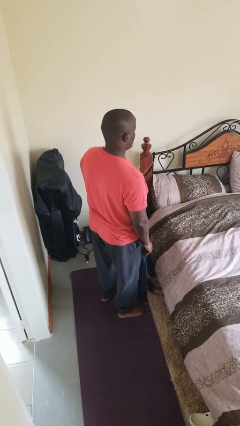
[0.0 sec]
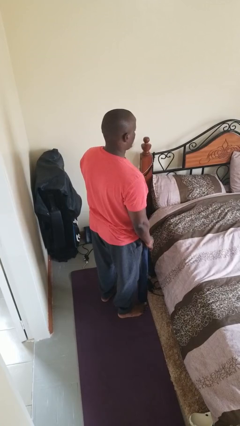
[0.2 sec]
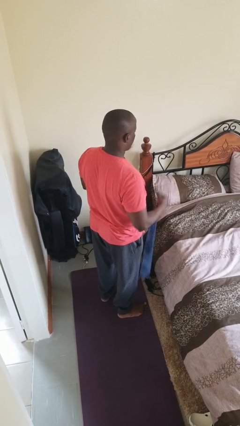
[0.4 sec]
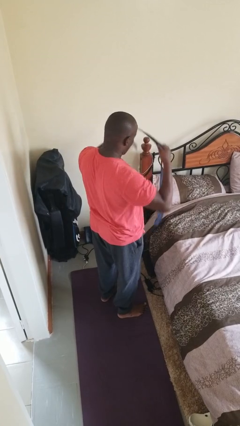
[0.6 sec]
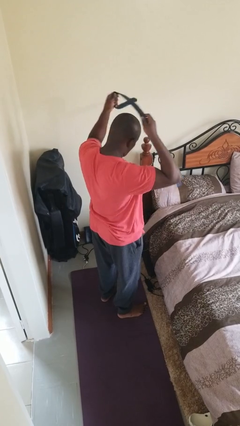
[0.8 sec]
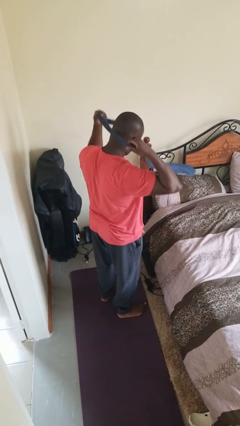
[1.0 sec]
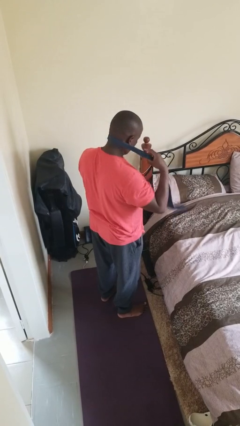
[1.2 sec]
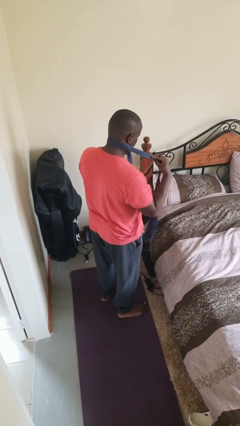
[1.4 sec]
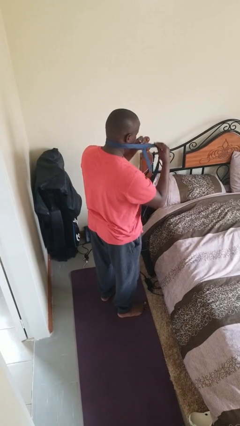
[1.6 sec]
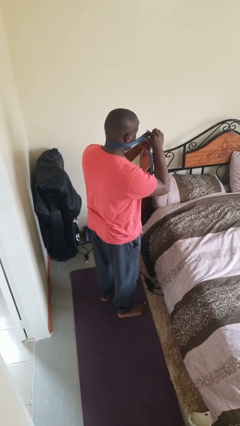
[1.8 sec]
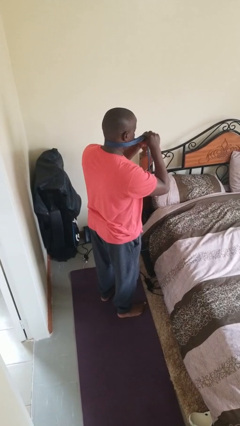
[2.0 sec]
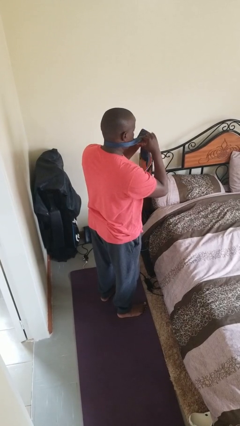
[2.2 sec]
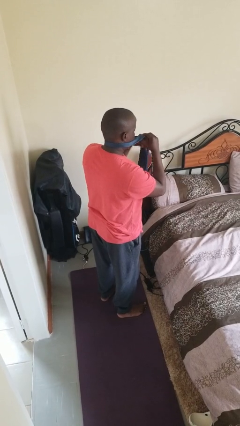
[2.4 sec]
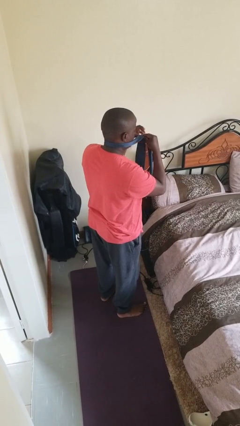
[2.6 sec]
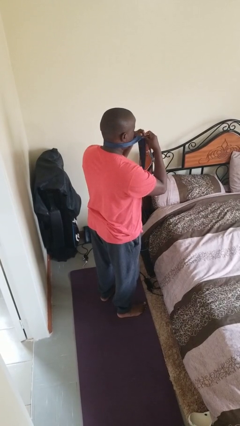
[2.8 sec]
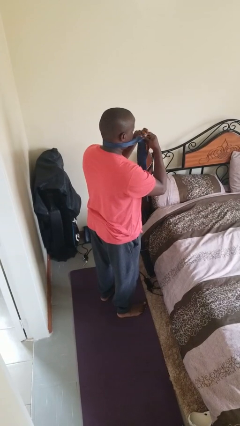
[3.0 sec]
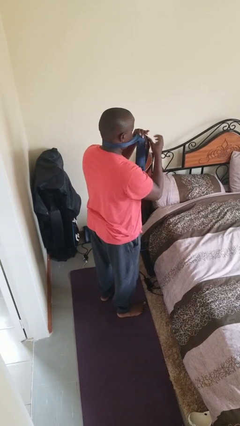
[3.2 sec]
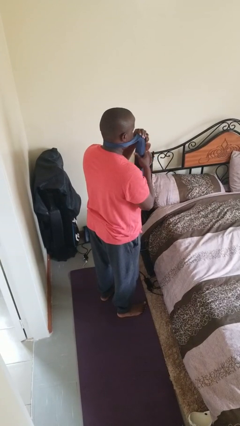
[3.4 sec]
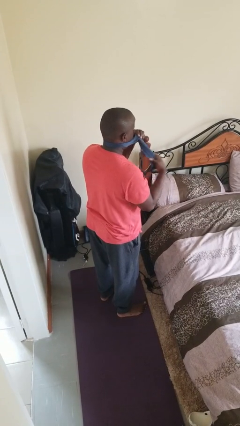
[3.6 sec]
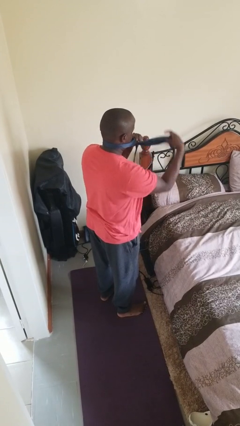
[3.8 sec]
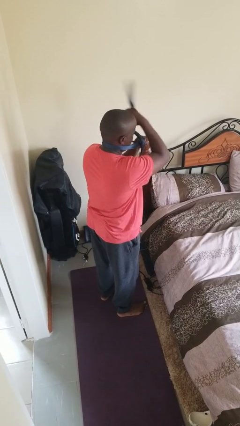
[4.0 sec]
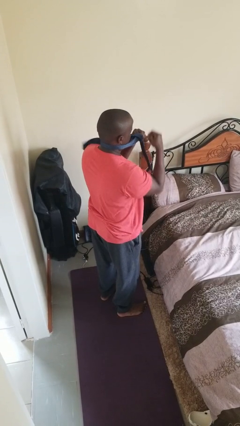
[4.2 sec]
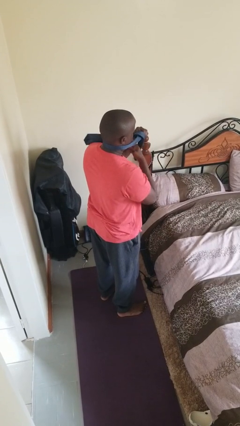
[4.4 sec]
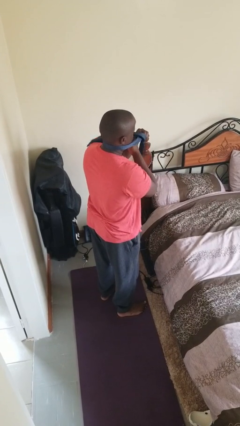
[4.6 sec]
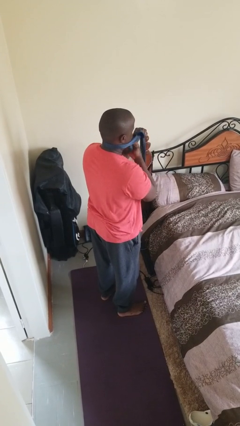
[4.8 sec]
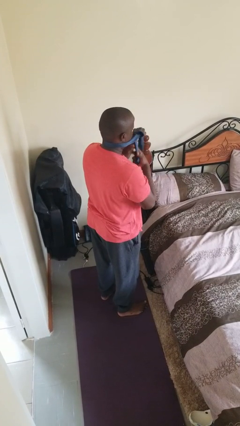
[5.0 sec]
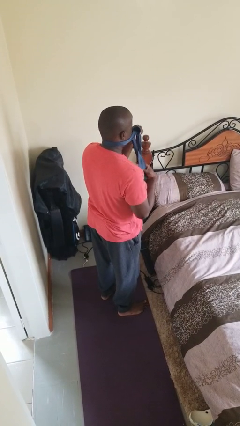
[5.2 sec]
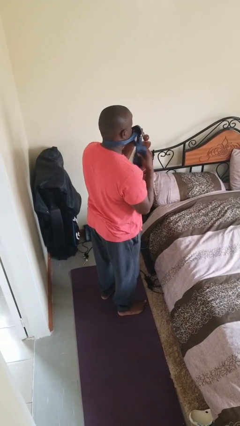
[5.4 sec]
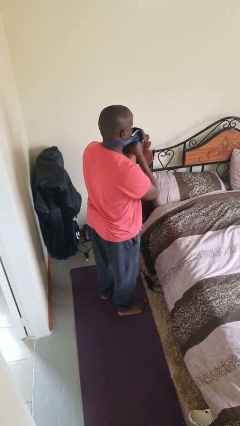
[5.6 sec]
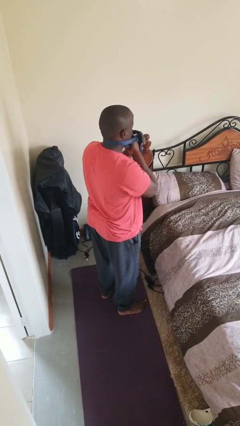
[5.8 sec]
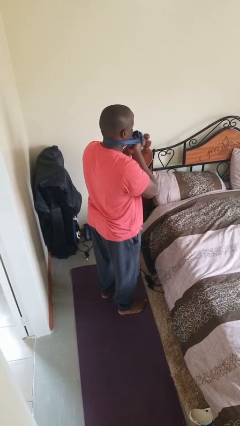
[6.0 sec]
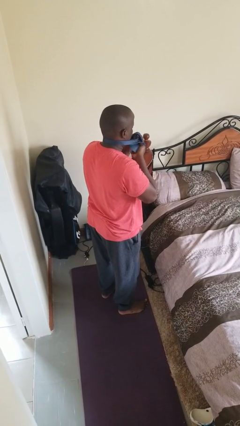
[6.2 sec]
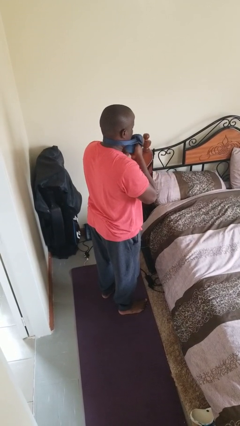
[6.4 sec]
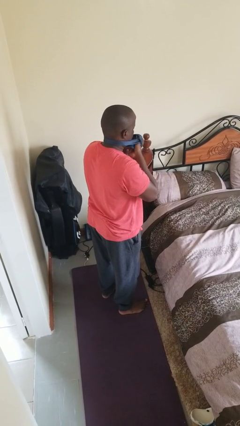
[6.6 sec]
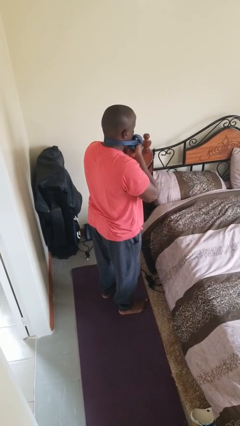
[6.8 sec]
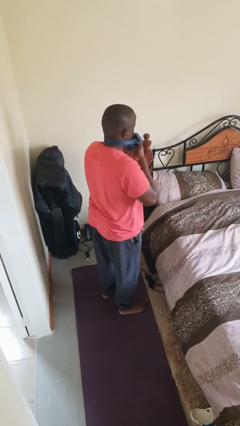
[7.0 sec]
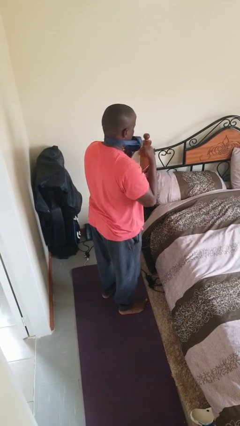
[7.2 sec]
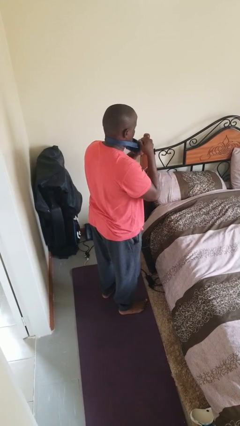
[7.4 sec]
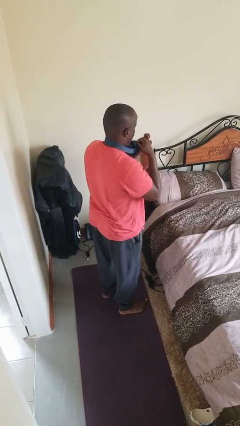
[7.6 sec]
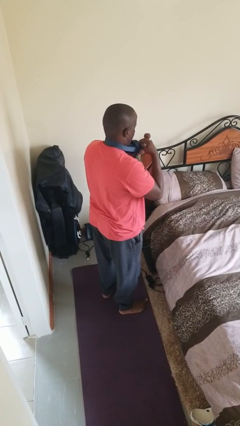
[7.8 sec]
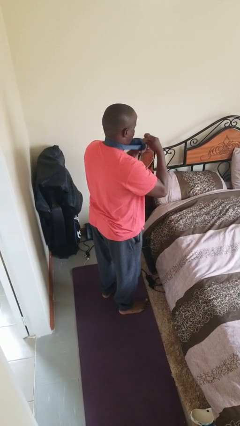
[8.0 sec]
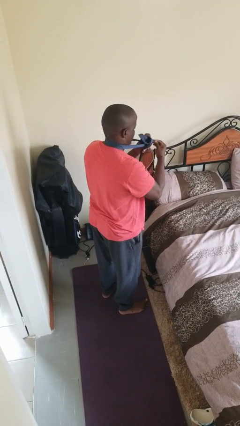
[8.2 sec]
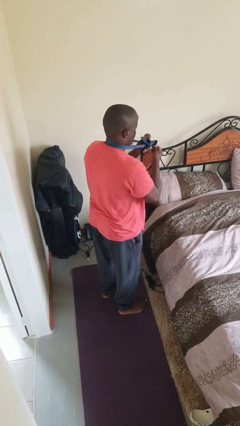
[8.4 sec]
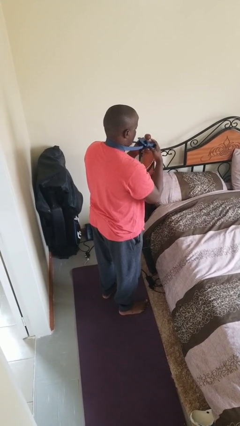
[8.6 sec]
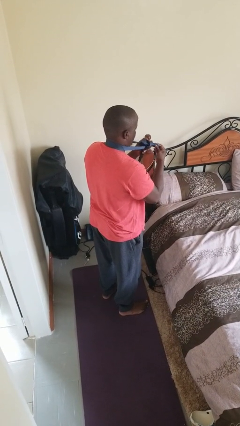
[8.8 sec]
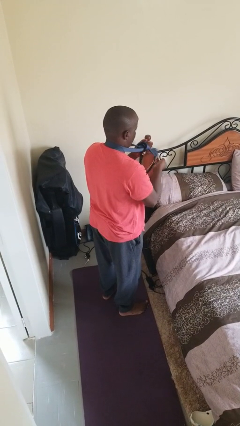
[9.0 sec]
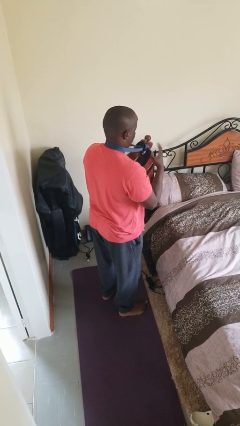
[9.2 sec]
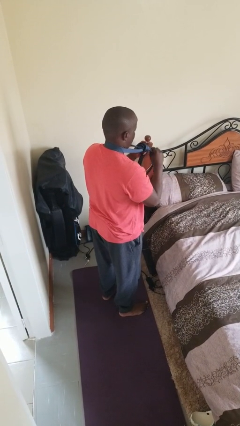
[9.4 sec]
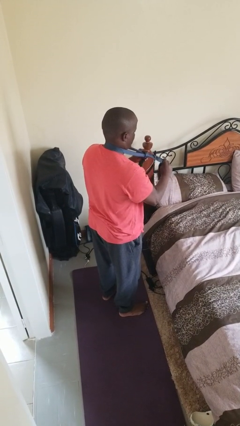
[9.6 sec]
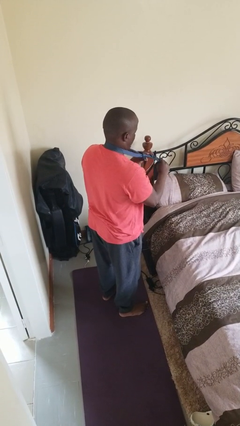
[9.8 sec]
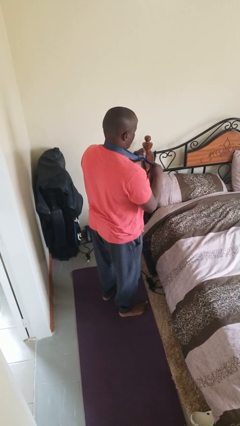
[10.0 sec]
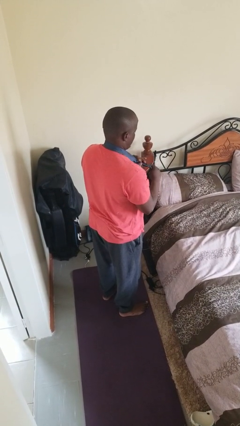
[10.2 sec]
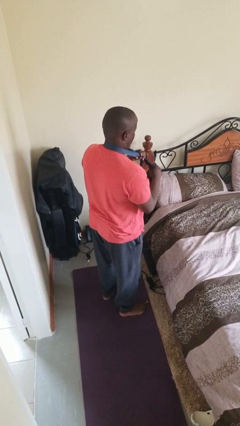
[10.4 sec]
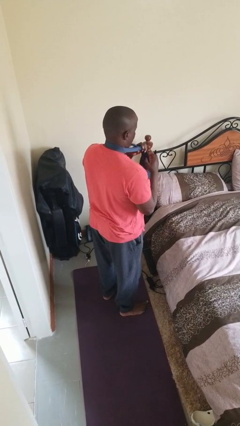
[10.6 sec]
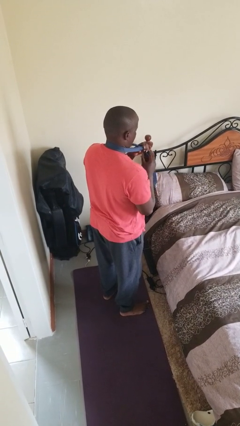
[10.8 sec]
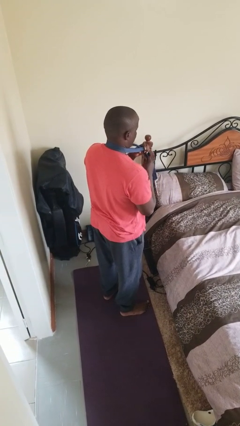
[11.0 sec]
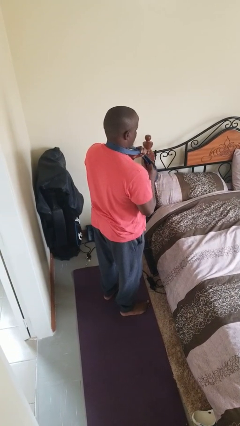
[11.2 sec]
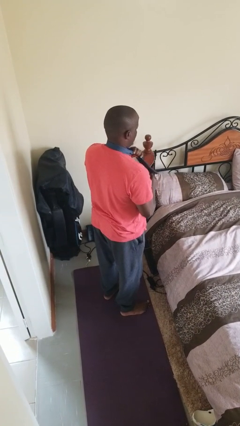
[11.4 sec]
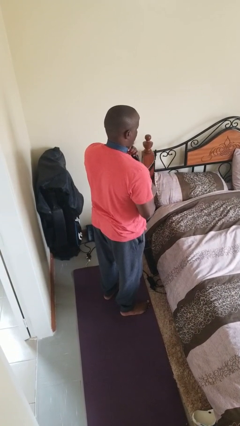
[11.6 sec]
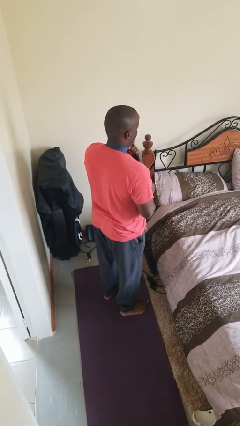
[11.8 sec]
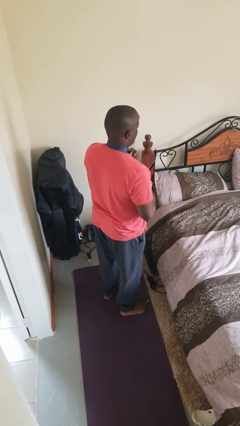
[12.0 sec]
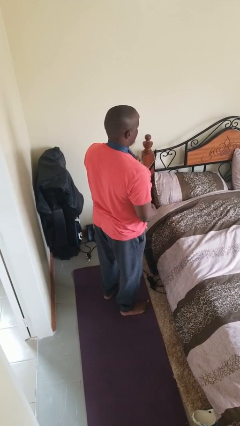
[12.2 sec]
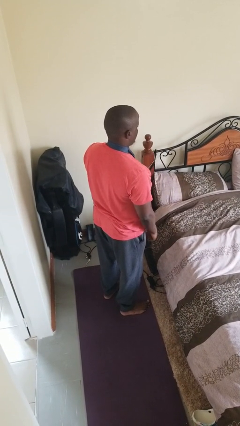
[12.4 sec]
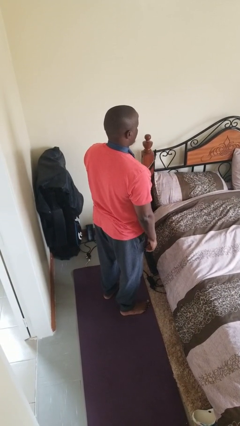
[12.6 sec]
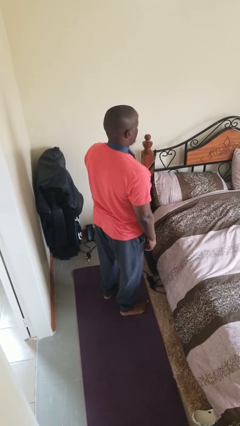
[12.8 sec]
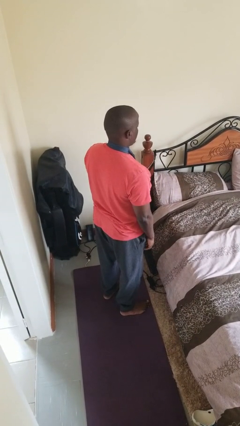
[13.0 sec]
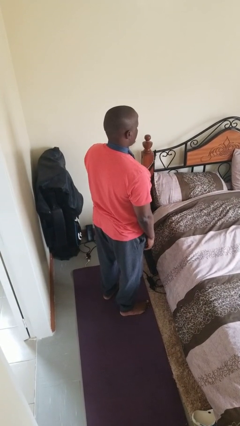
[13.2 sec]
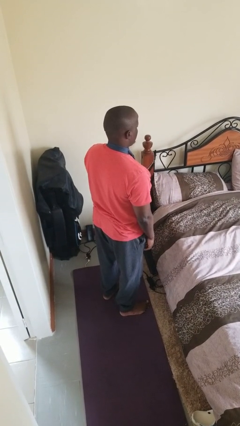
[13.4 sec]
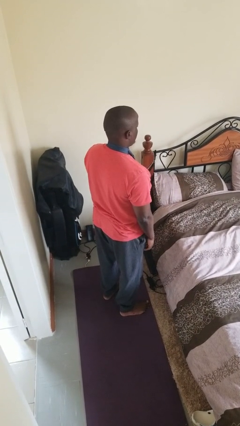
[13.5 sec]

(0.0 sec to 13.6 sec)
person puts on necktie

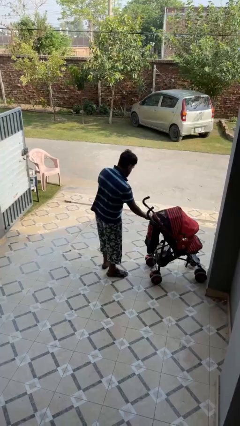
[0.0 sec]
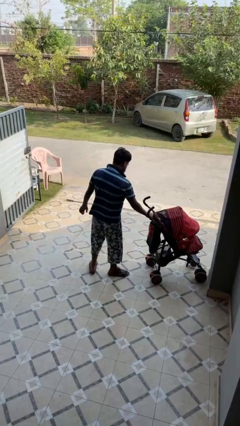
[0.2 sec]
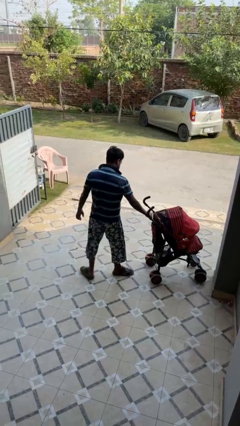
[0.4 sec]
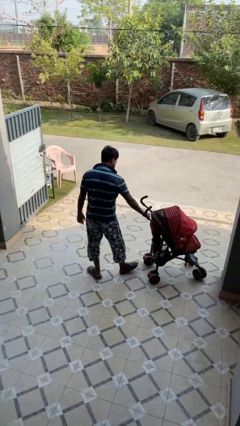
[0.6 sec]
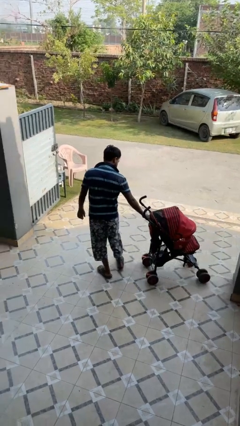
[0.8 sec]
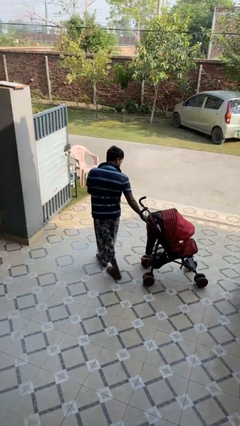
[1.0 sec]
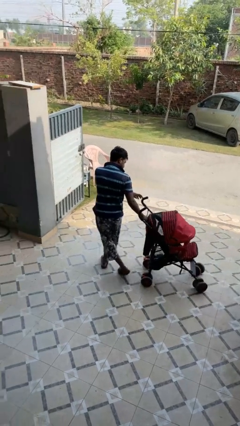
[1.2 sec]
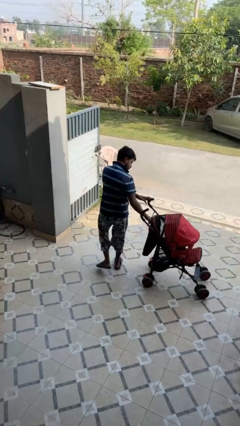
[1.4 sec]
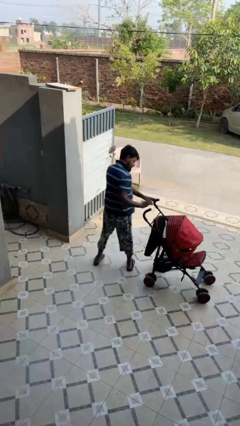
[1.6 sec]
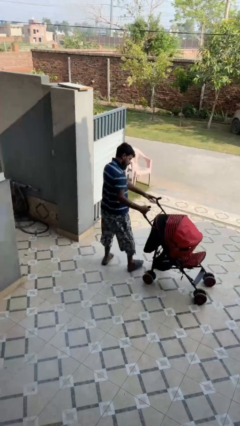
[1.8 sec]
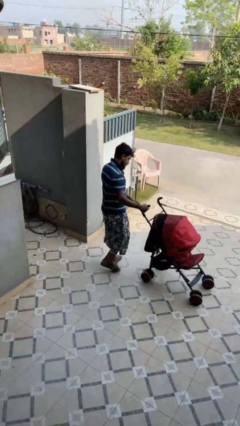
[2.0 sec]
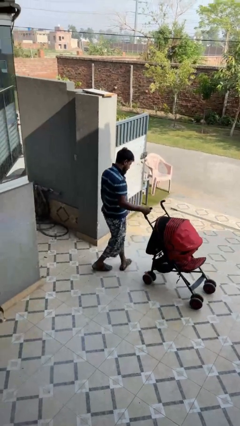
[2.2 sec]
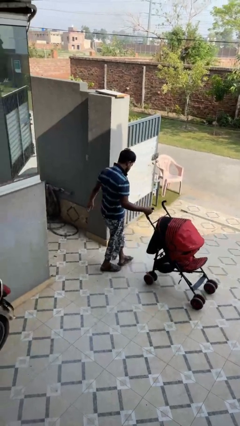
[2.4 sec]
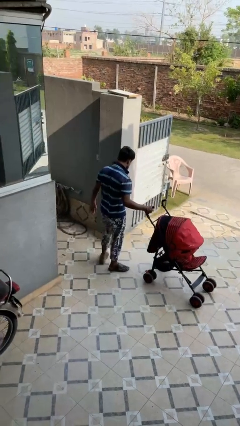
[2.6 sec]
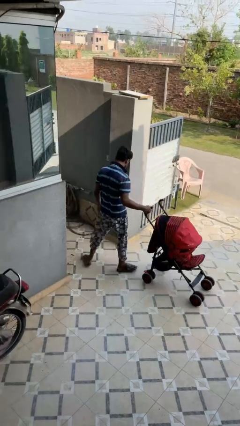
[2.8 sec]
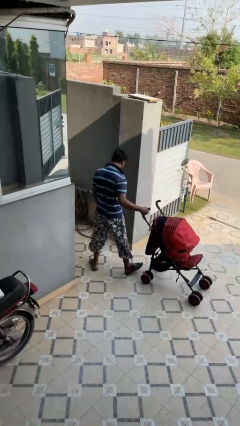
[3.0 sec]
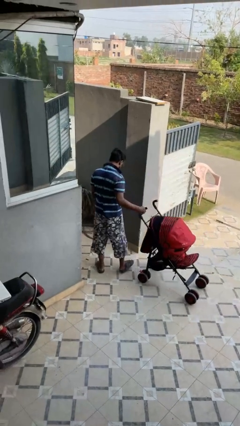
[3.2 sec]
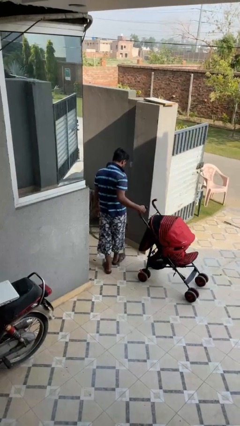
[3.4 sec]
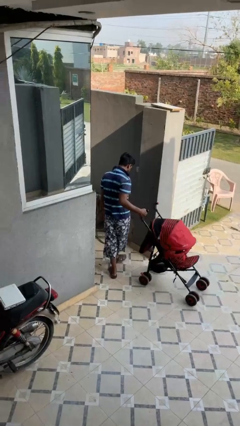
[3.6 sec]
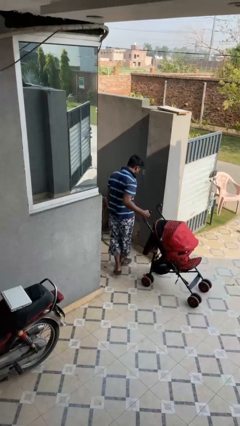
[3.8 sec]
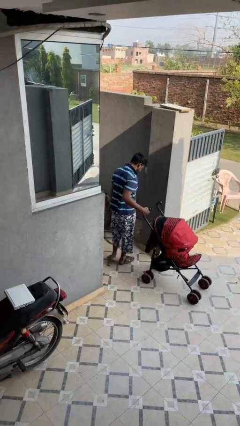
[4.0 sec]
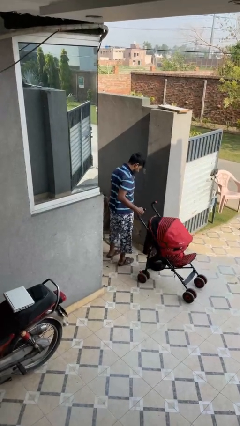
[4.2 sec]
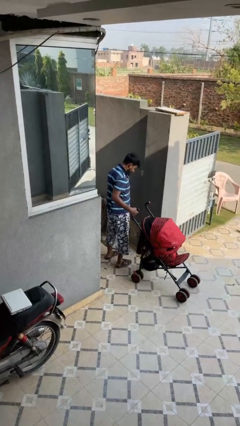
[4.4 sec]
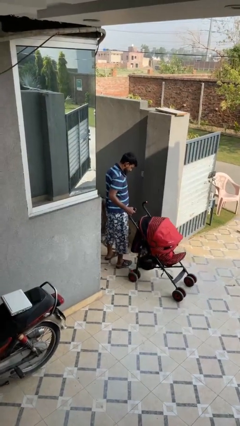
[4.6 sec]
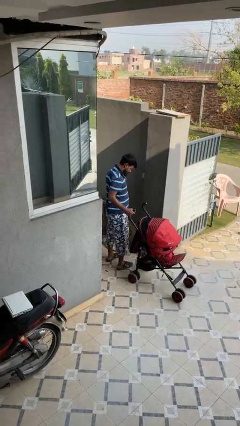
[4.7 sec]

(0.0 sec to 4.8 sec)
person pulls wheeled cart
